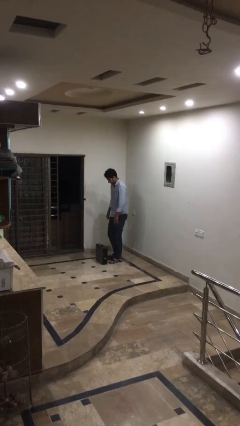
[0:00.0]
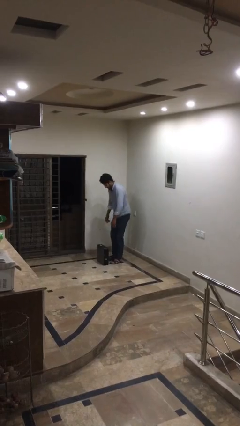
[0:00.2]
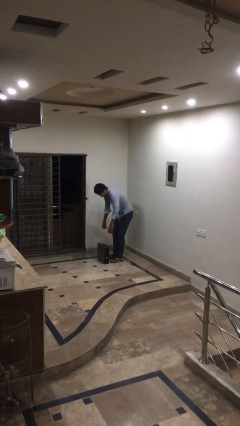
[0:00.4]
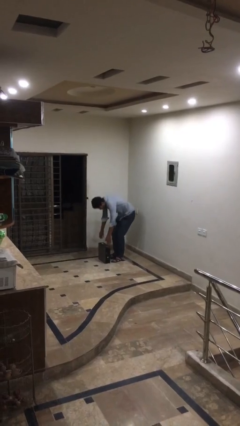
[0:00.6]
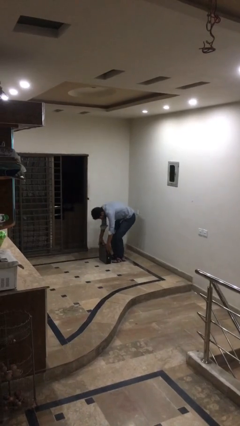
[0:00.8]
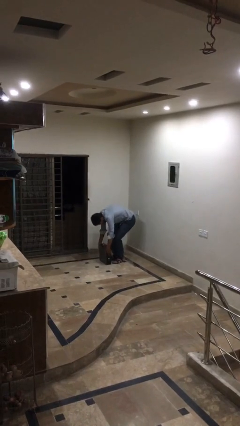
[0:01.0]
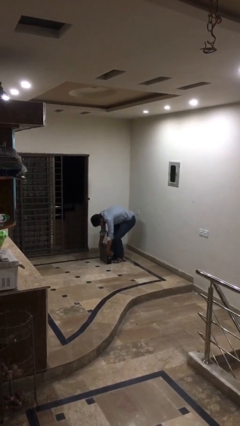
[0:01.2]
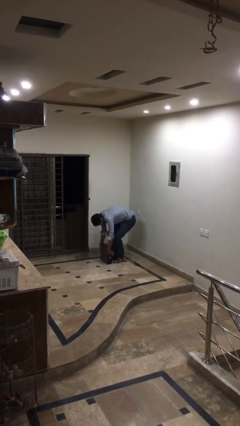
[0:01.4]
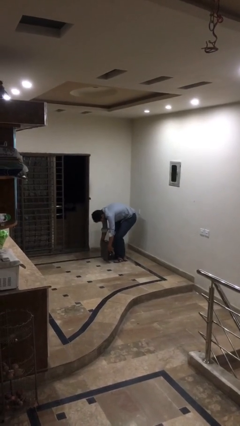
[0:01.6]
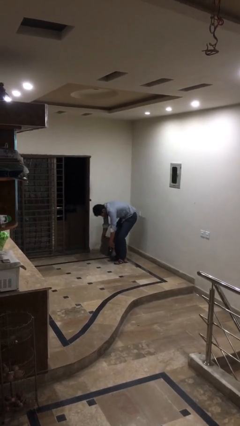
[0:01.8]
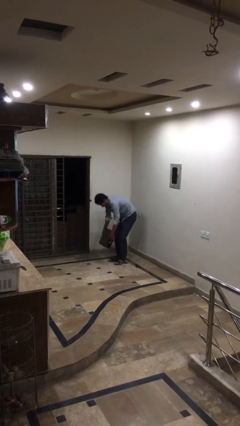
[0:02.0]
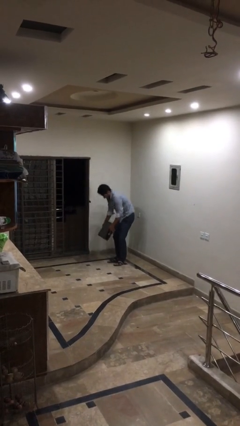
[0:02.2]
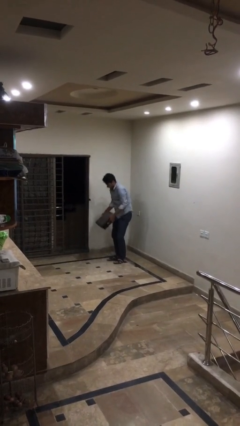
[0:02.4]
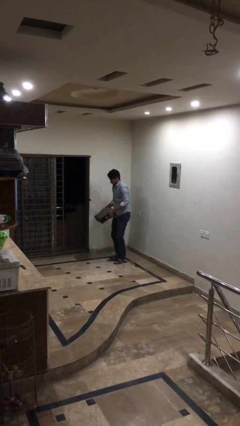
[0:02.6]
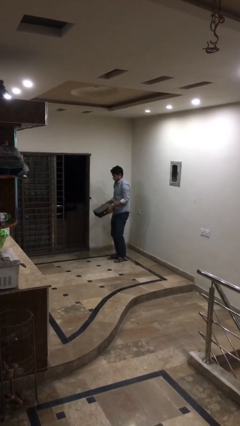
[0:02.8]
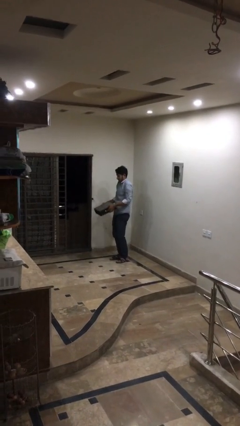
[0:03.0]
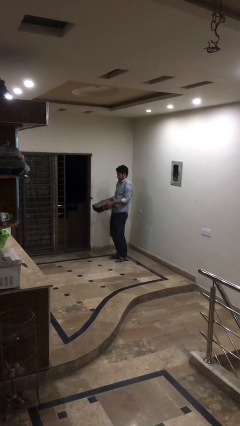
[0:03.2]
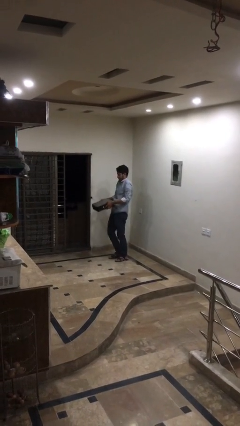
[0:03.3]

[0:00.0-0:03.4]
person picks up object from floor

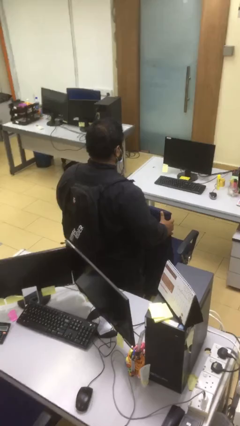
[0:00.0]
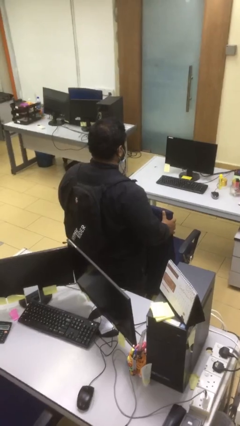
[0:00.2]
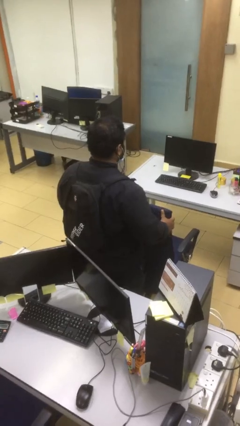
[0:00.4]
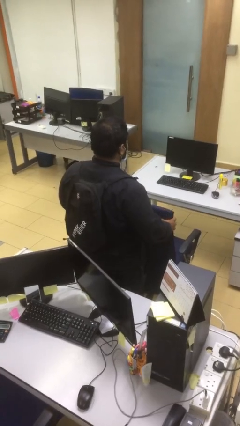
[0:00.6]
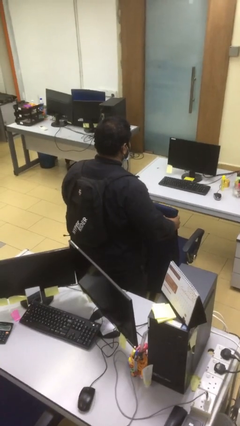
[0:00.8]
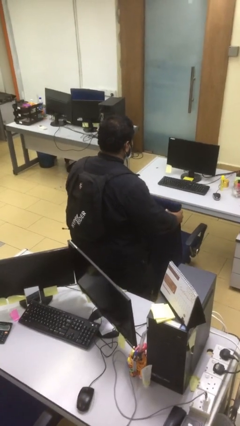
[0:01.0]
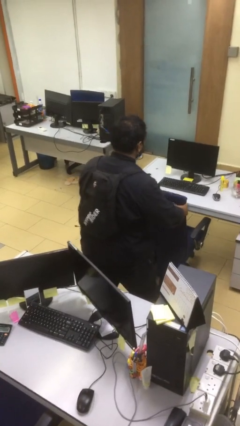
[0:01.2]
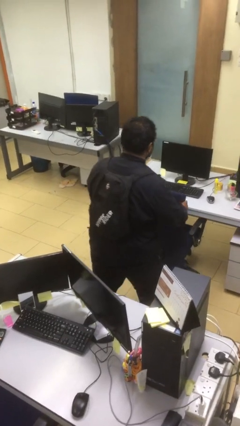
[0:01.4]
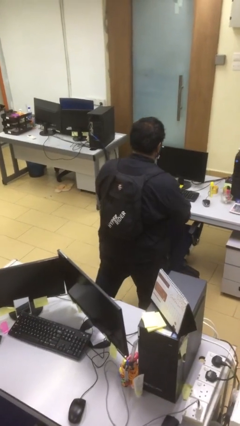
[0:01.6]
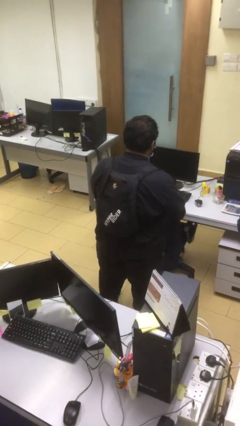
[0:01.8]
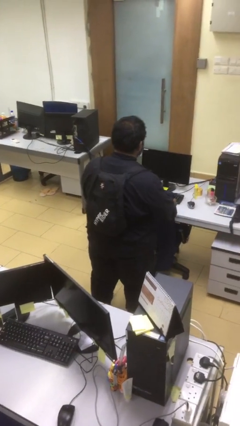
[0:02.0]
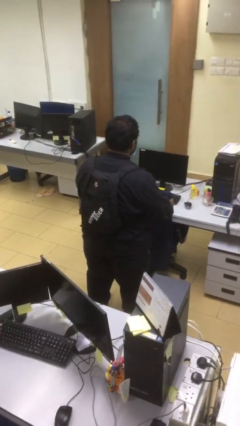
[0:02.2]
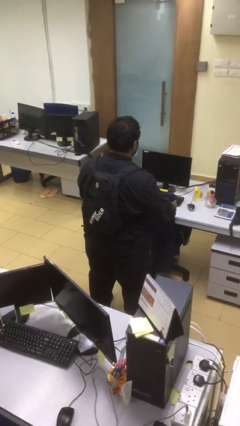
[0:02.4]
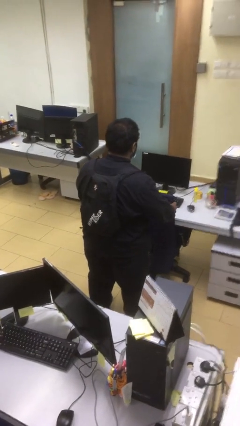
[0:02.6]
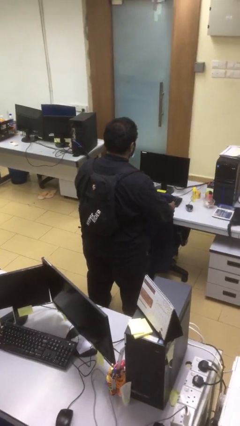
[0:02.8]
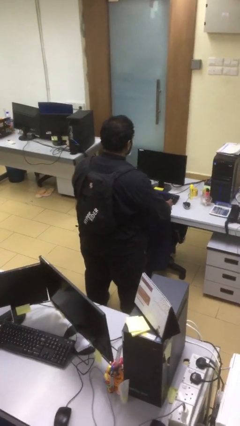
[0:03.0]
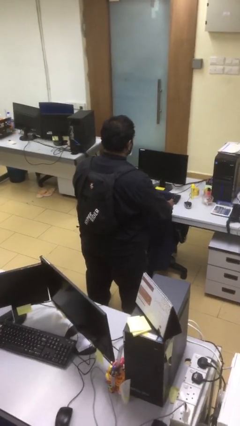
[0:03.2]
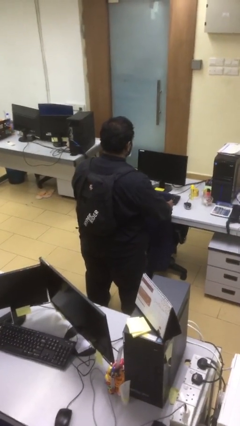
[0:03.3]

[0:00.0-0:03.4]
person pushes in chair

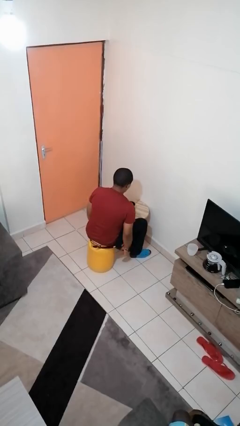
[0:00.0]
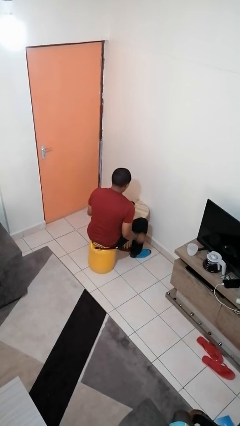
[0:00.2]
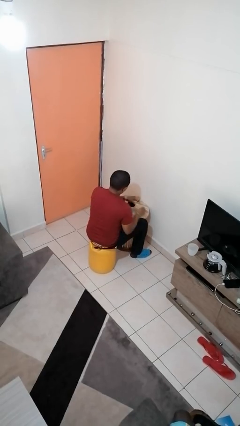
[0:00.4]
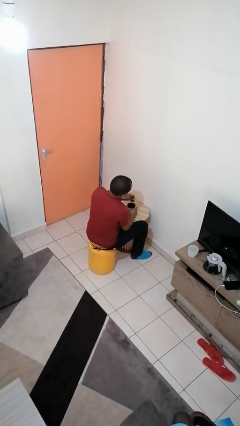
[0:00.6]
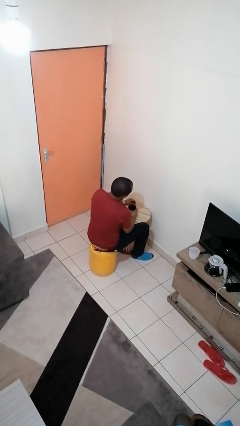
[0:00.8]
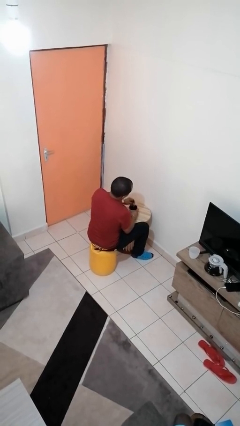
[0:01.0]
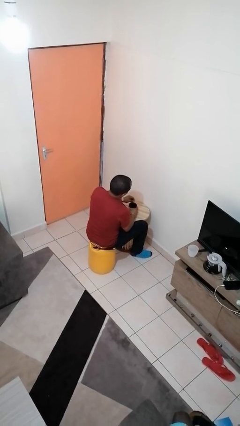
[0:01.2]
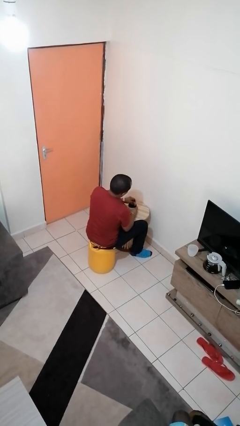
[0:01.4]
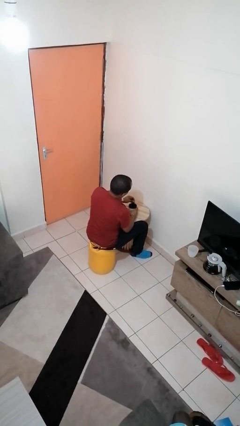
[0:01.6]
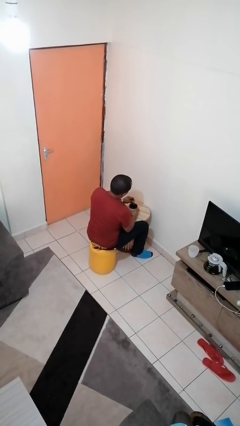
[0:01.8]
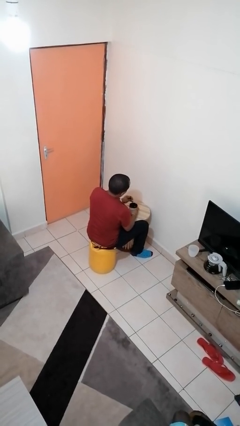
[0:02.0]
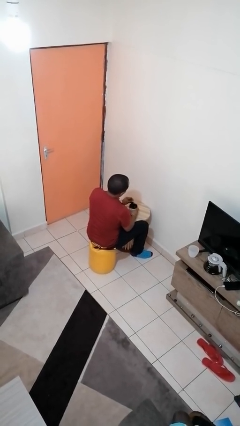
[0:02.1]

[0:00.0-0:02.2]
person stirs mug

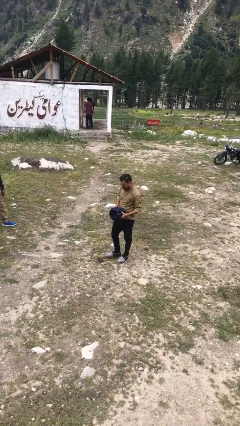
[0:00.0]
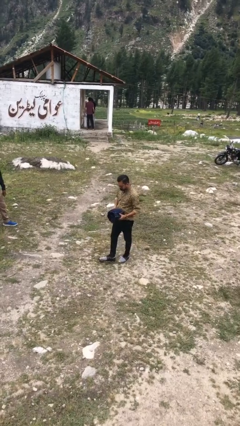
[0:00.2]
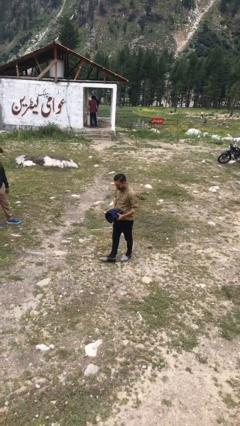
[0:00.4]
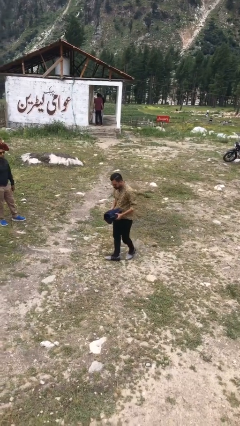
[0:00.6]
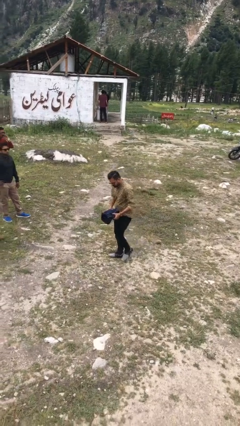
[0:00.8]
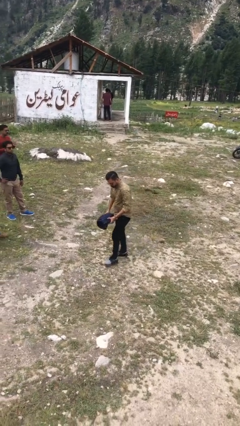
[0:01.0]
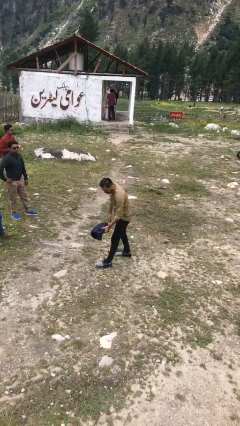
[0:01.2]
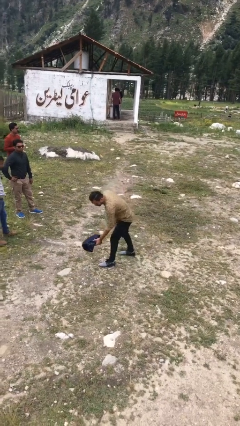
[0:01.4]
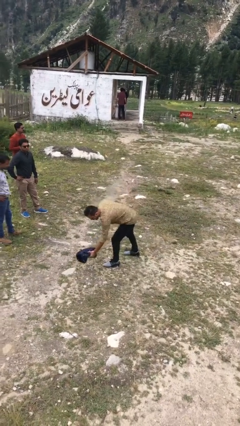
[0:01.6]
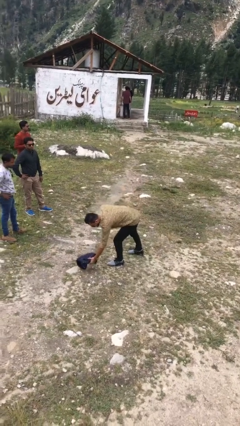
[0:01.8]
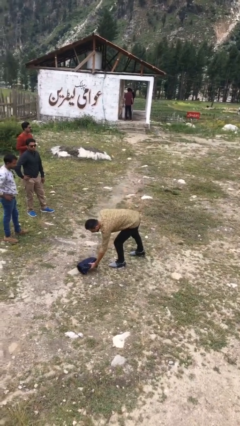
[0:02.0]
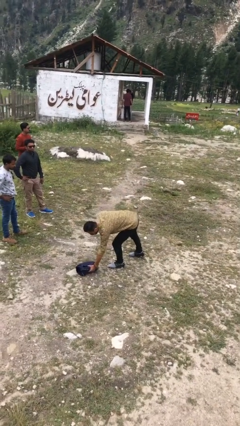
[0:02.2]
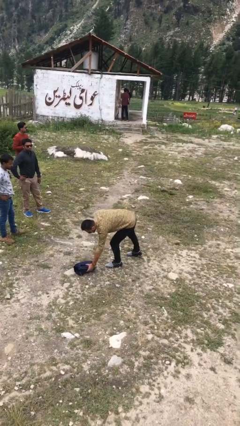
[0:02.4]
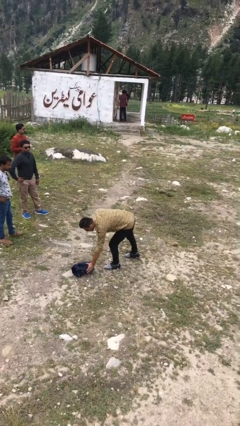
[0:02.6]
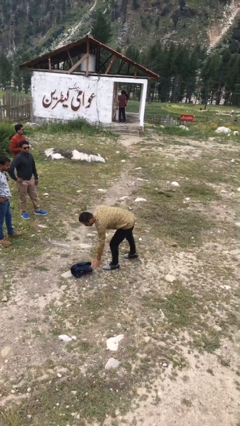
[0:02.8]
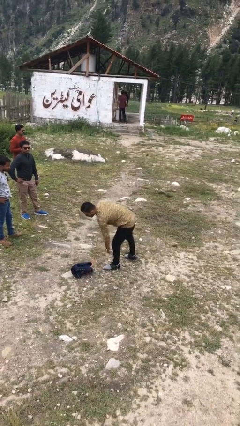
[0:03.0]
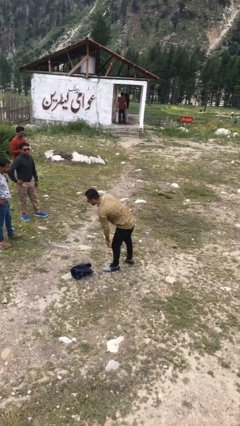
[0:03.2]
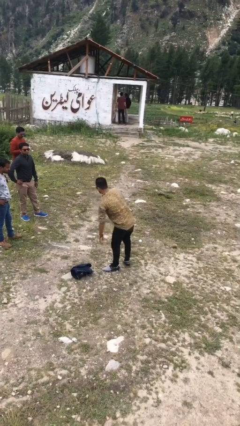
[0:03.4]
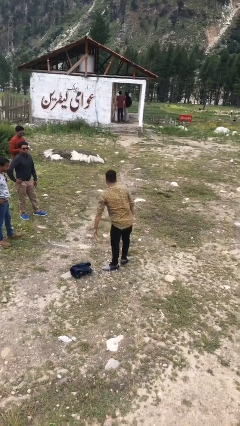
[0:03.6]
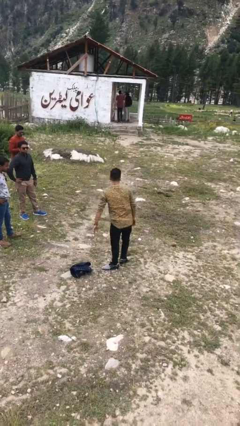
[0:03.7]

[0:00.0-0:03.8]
person puts down object on floor

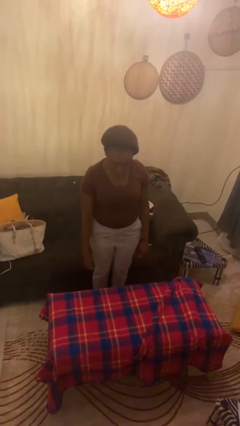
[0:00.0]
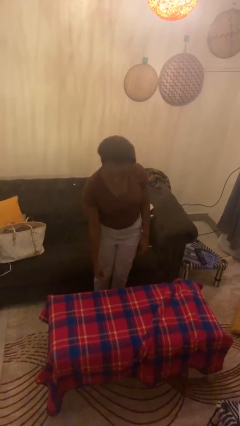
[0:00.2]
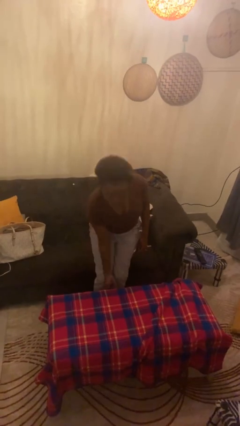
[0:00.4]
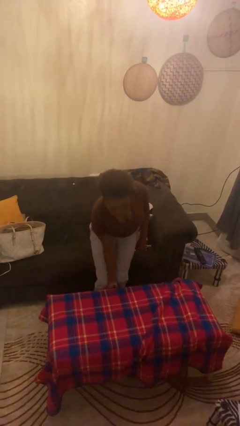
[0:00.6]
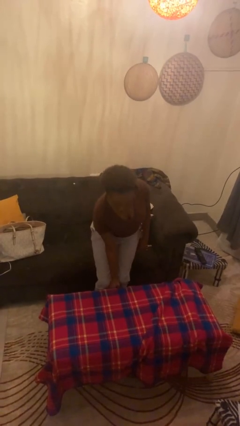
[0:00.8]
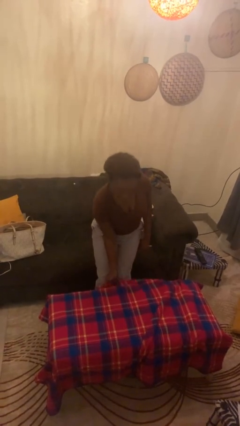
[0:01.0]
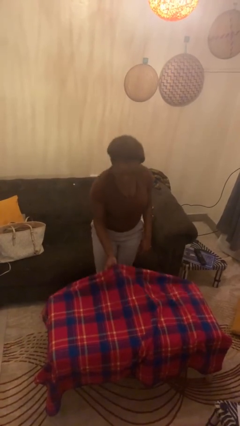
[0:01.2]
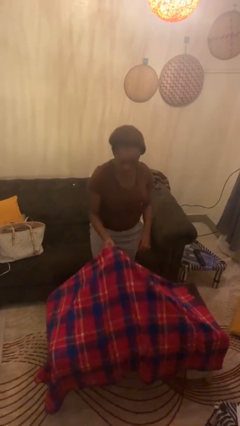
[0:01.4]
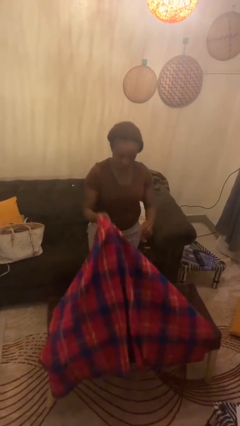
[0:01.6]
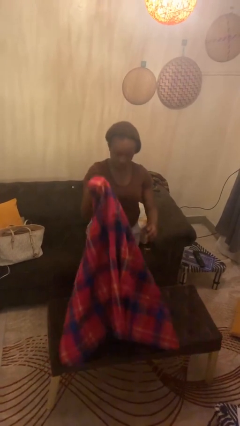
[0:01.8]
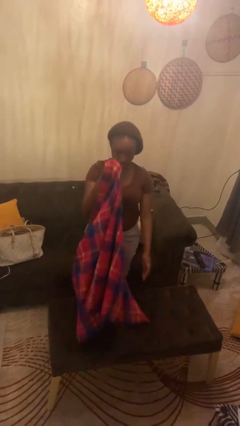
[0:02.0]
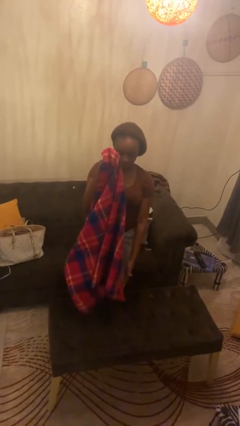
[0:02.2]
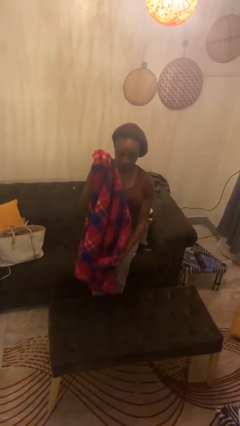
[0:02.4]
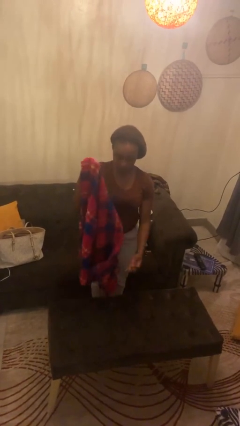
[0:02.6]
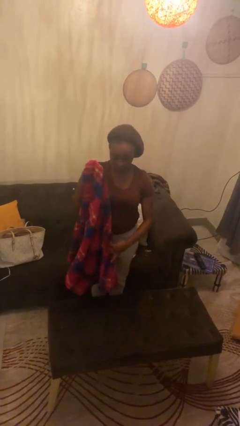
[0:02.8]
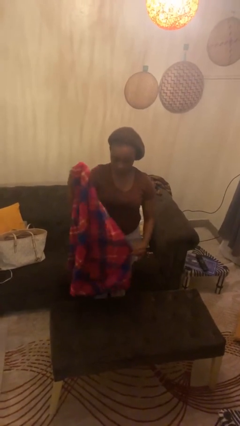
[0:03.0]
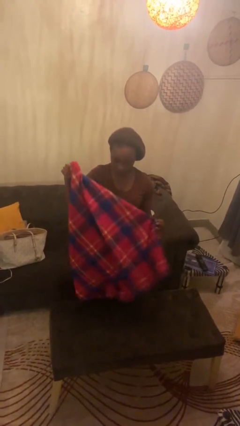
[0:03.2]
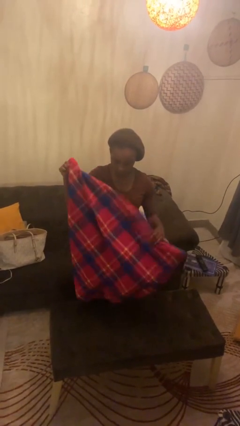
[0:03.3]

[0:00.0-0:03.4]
person folds tablecloth

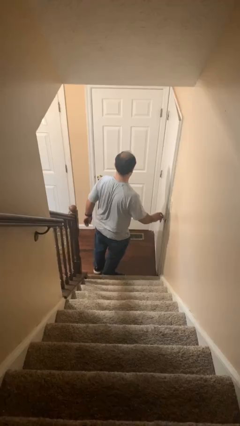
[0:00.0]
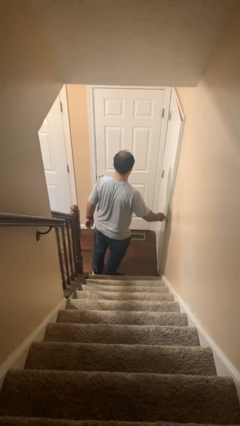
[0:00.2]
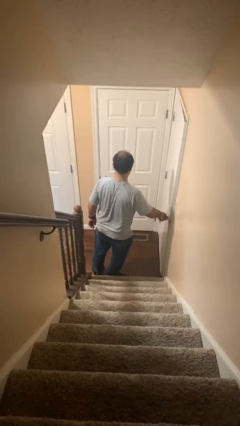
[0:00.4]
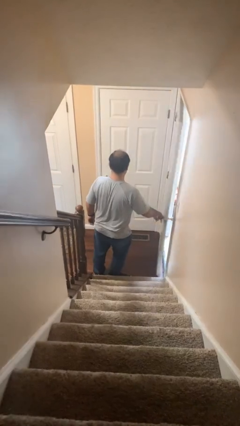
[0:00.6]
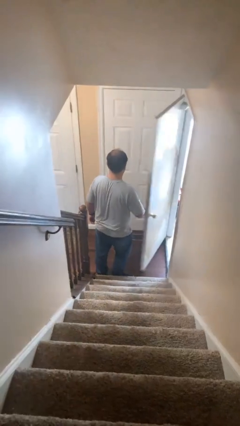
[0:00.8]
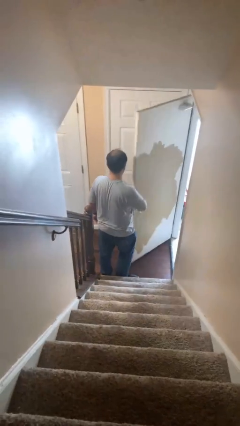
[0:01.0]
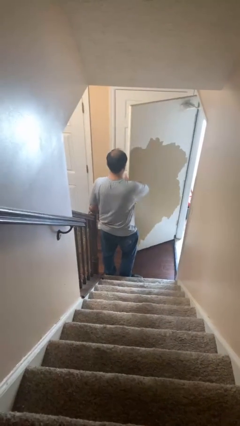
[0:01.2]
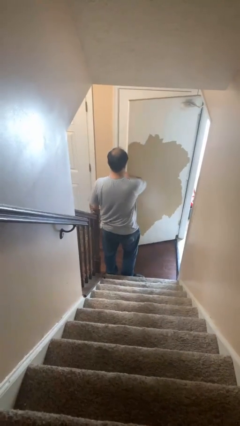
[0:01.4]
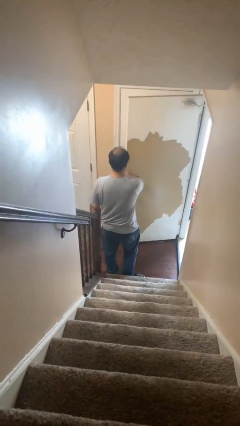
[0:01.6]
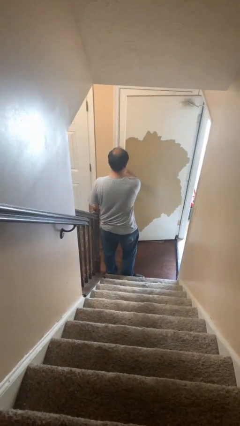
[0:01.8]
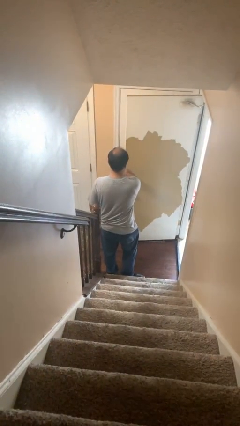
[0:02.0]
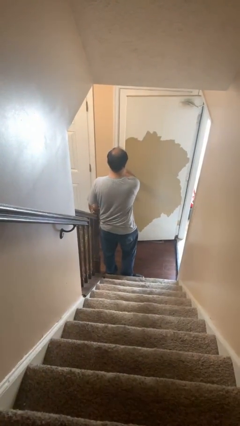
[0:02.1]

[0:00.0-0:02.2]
person opens facility door
